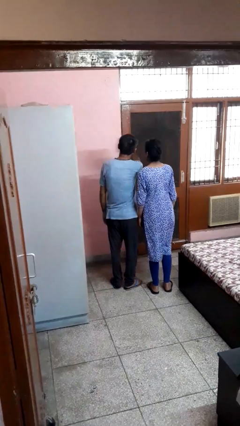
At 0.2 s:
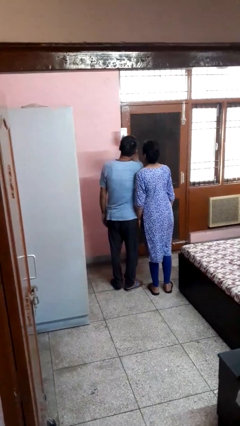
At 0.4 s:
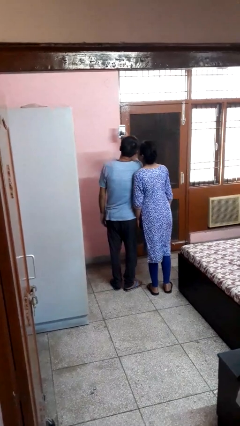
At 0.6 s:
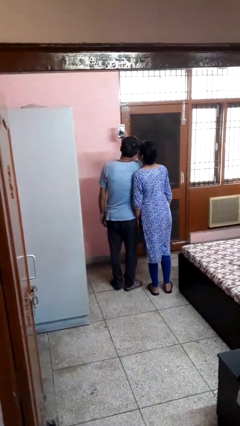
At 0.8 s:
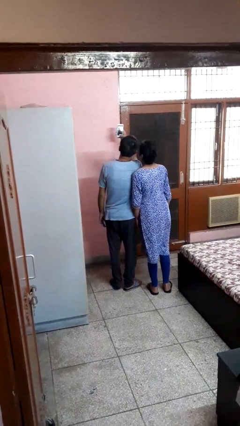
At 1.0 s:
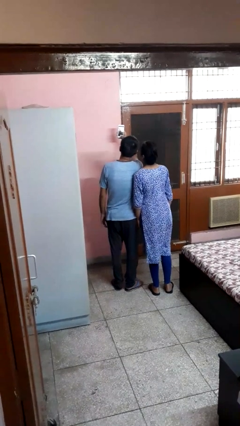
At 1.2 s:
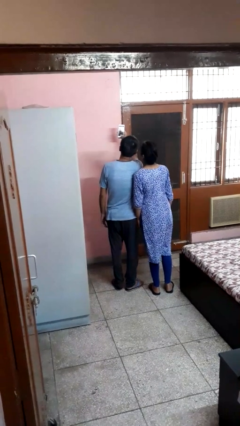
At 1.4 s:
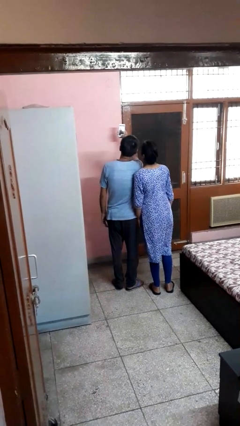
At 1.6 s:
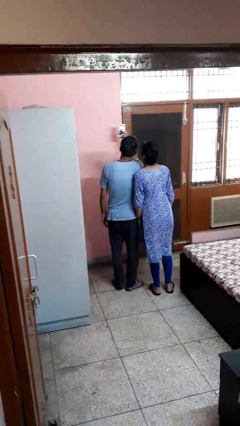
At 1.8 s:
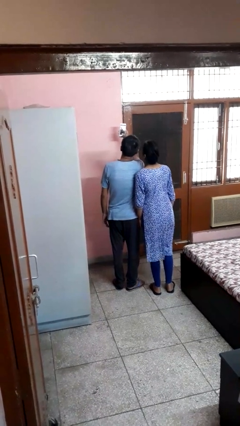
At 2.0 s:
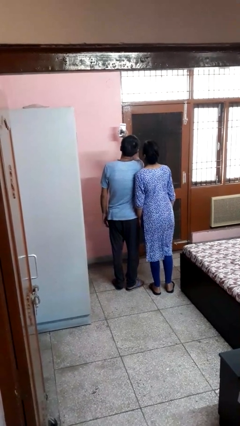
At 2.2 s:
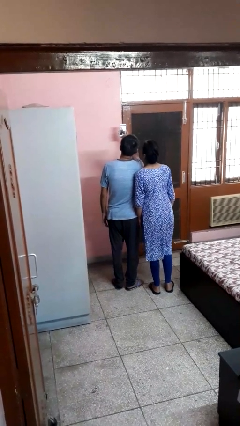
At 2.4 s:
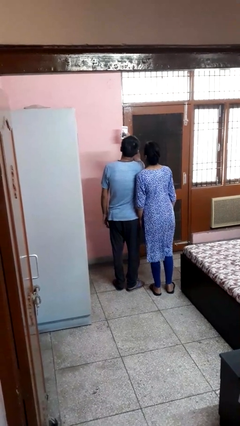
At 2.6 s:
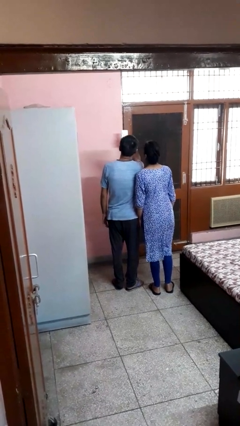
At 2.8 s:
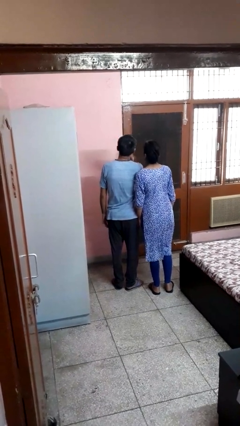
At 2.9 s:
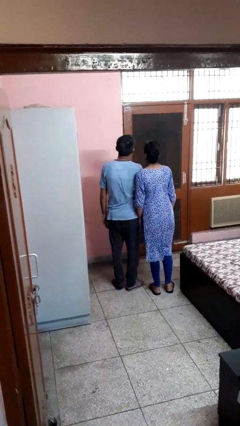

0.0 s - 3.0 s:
person takes selfie with person

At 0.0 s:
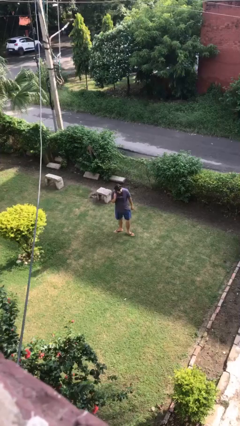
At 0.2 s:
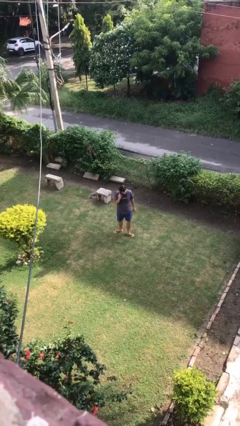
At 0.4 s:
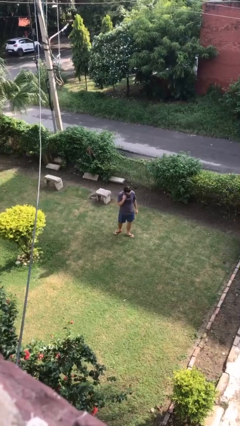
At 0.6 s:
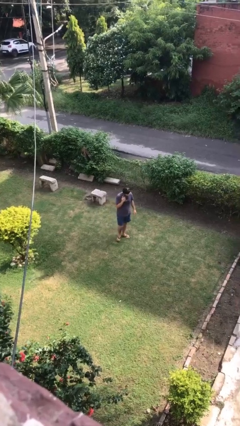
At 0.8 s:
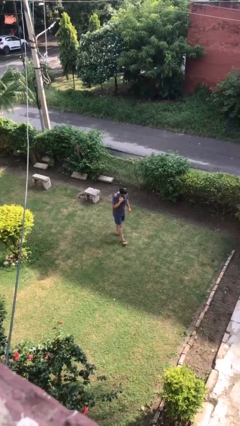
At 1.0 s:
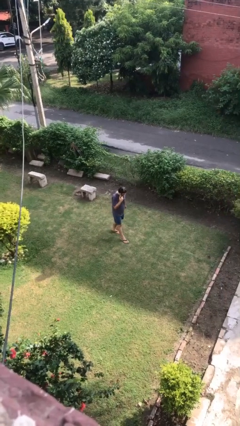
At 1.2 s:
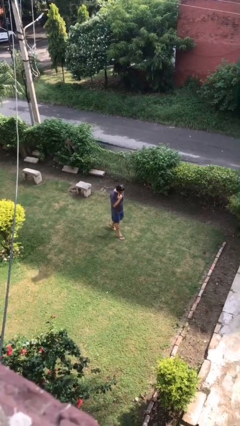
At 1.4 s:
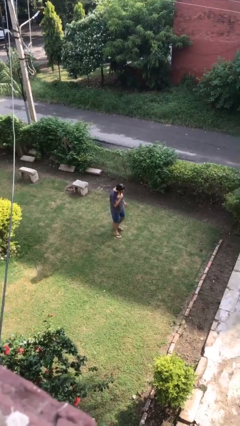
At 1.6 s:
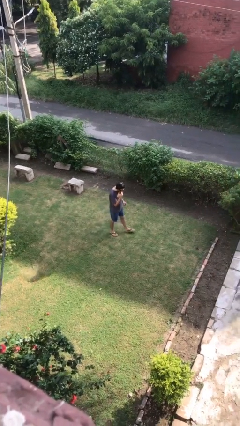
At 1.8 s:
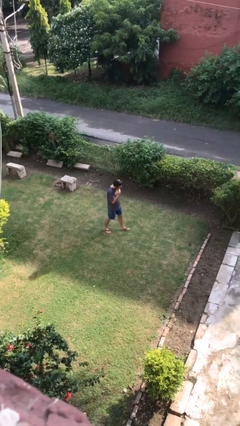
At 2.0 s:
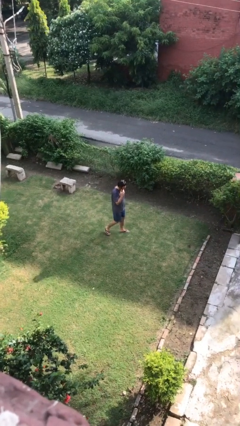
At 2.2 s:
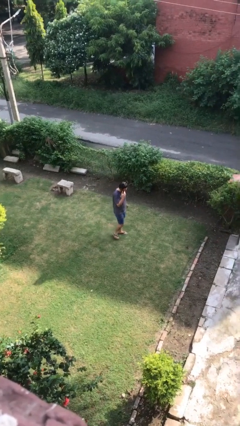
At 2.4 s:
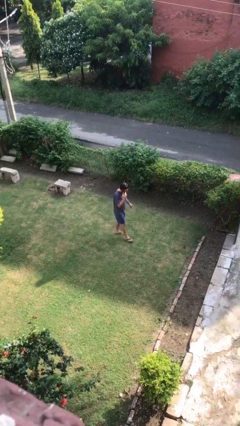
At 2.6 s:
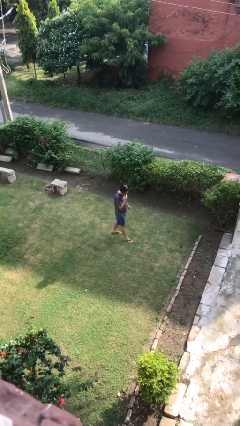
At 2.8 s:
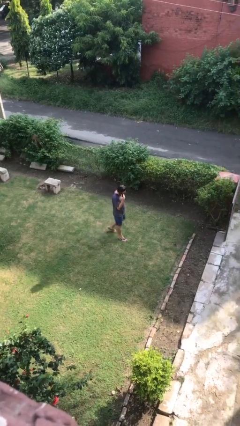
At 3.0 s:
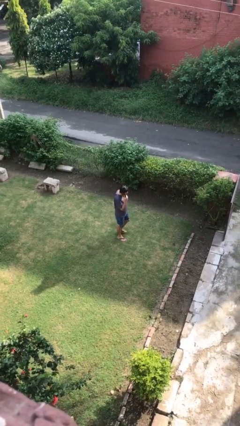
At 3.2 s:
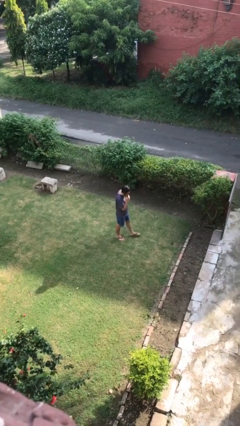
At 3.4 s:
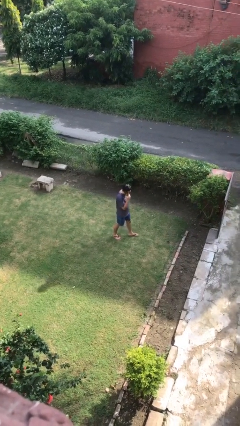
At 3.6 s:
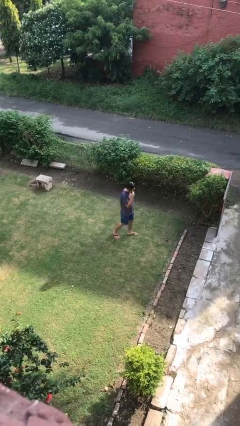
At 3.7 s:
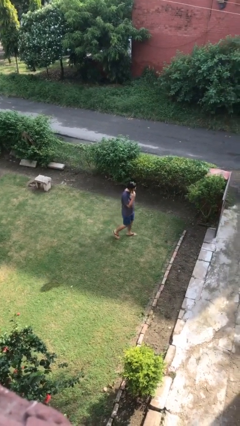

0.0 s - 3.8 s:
person talks on phone

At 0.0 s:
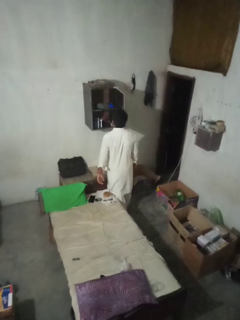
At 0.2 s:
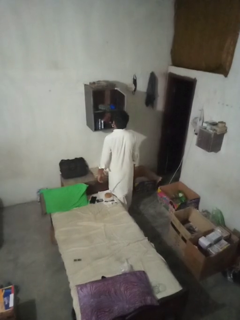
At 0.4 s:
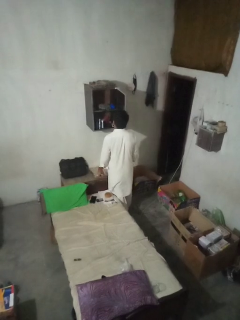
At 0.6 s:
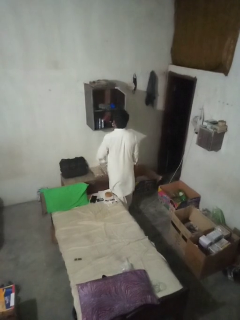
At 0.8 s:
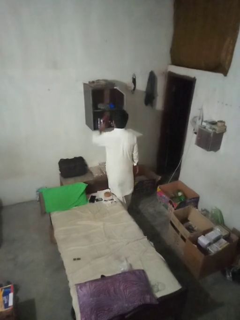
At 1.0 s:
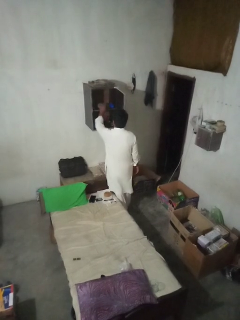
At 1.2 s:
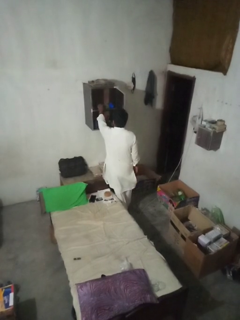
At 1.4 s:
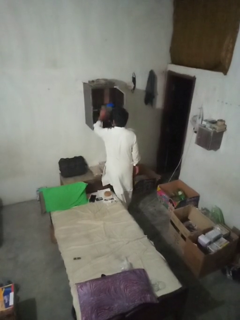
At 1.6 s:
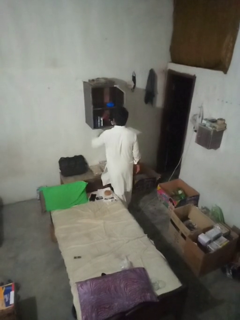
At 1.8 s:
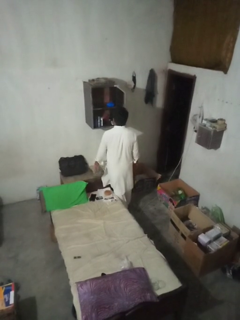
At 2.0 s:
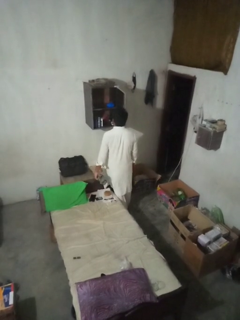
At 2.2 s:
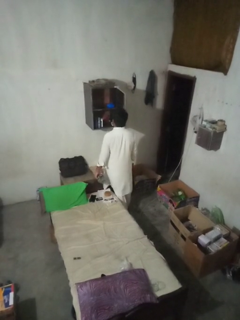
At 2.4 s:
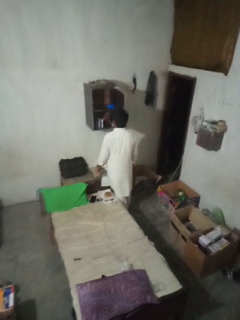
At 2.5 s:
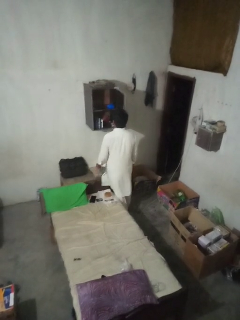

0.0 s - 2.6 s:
person takes clothes from dresser

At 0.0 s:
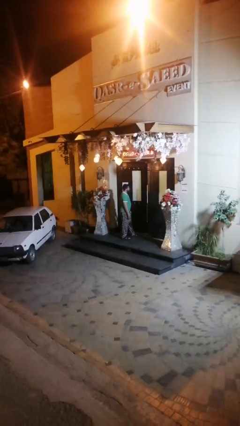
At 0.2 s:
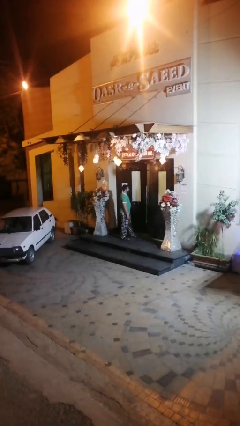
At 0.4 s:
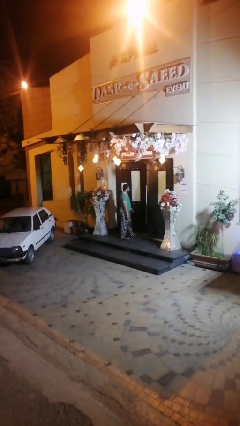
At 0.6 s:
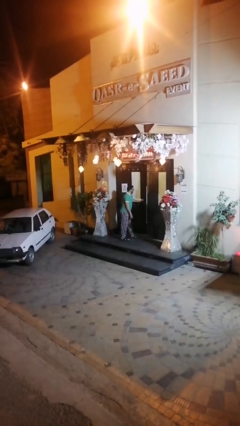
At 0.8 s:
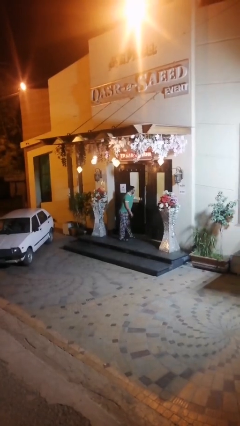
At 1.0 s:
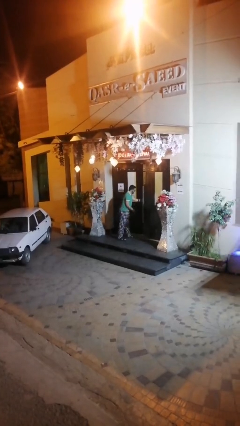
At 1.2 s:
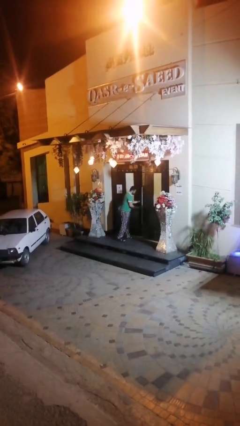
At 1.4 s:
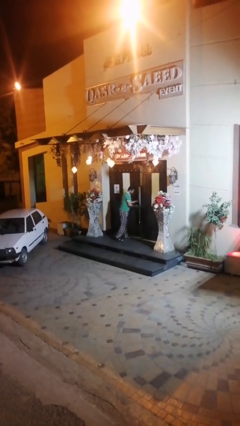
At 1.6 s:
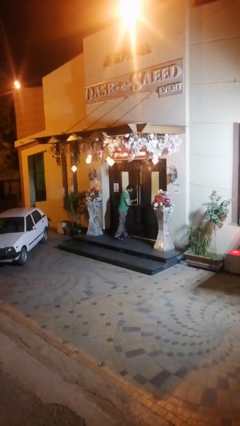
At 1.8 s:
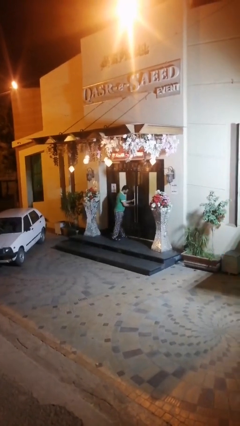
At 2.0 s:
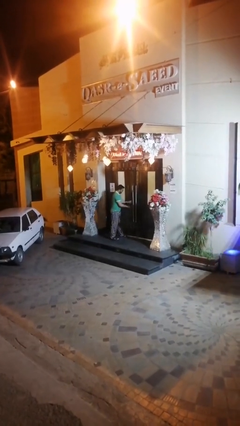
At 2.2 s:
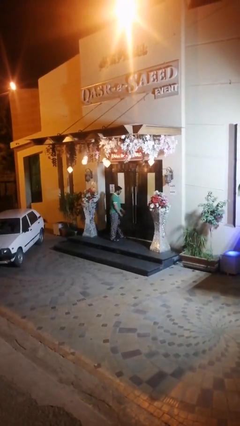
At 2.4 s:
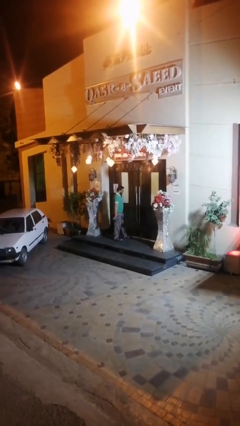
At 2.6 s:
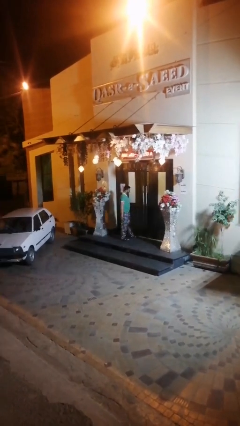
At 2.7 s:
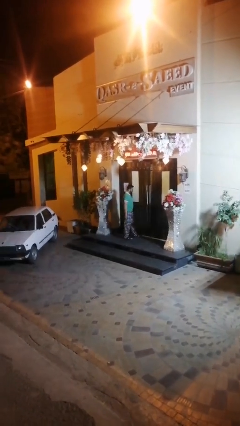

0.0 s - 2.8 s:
person closes facility door

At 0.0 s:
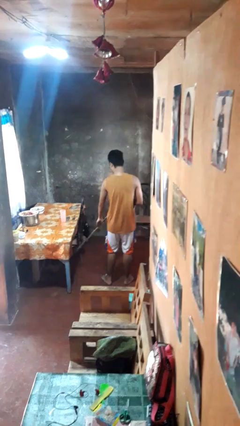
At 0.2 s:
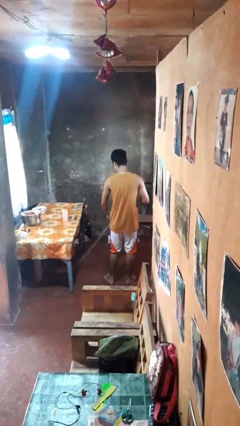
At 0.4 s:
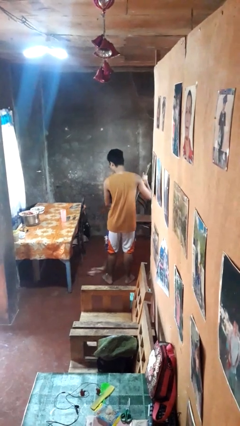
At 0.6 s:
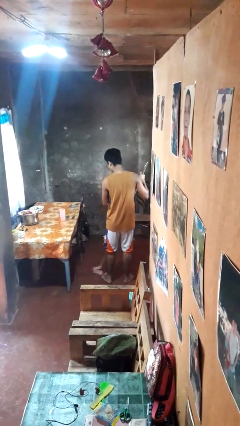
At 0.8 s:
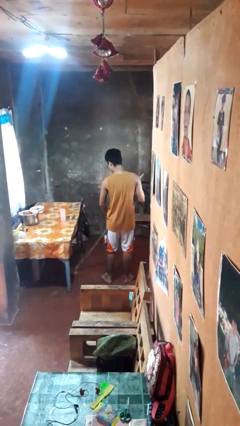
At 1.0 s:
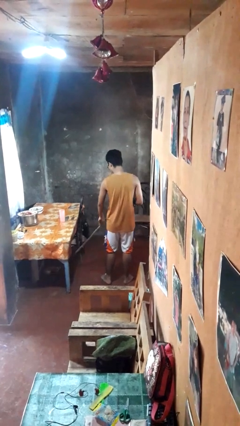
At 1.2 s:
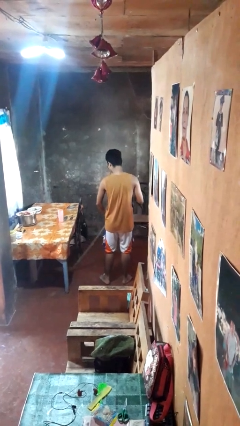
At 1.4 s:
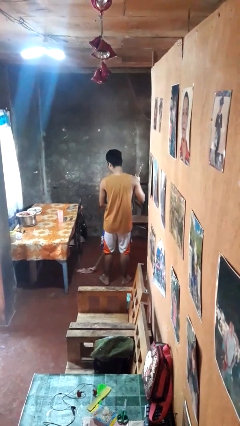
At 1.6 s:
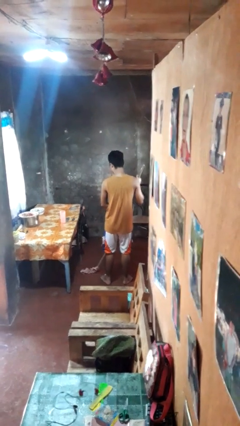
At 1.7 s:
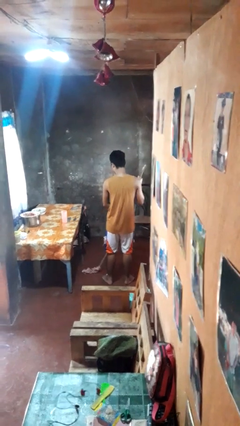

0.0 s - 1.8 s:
person mops

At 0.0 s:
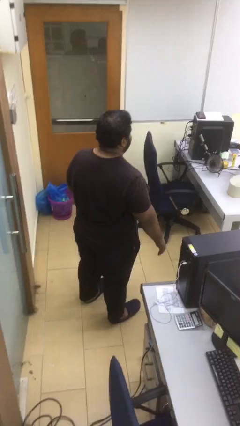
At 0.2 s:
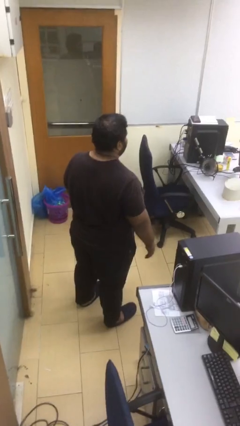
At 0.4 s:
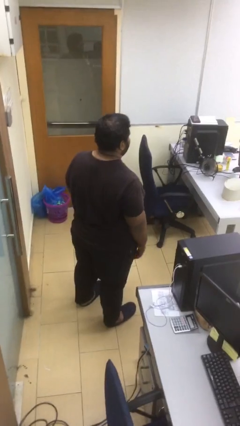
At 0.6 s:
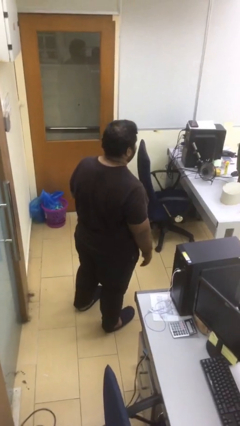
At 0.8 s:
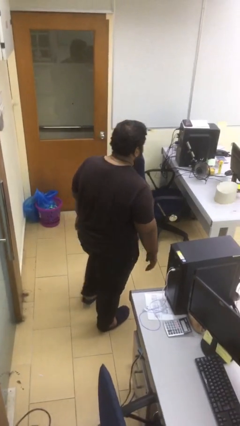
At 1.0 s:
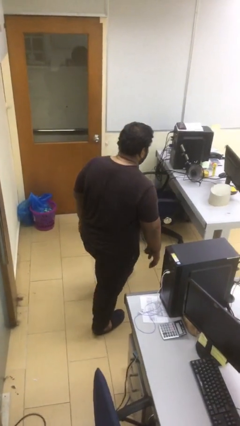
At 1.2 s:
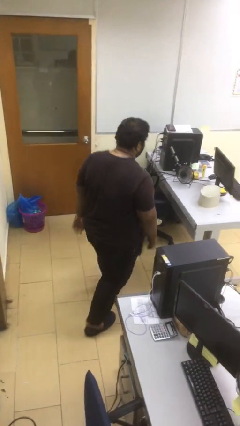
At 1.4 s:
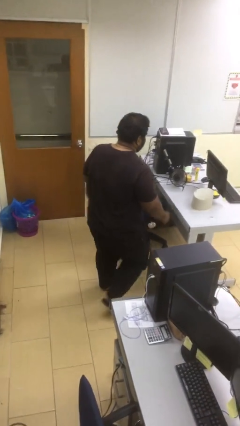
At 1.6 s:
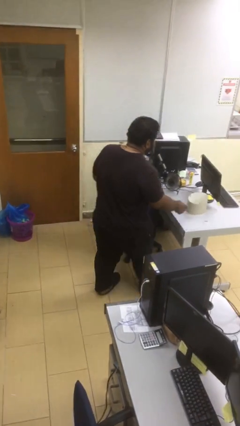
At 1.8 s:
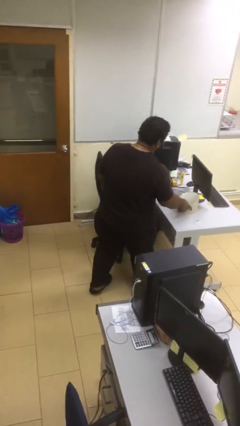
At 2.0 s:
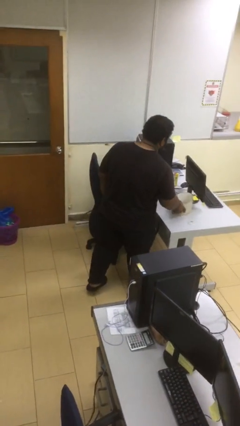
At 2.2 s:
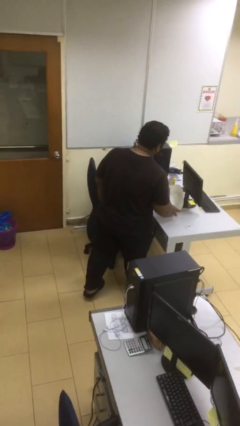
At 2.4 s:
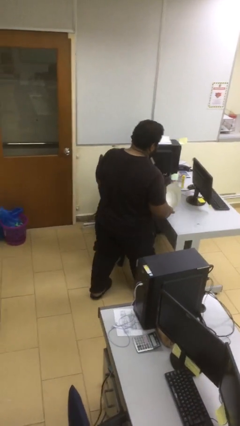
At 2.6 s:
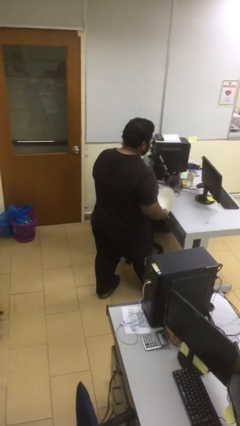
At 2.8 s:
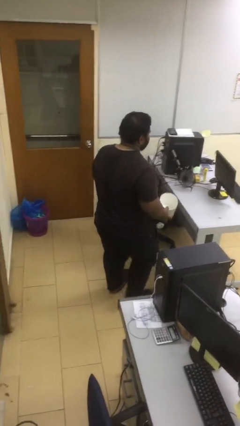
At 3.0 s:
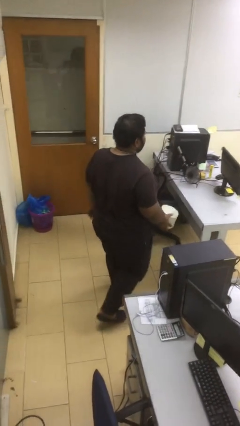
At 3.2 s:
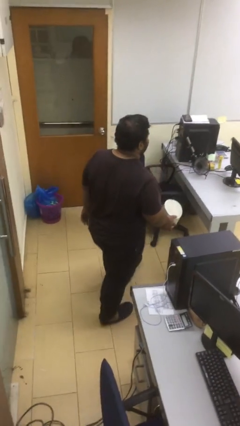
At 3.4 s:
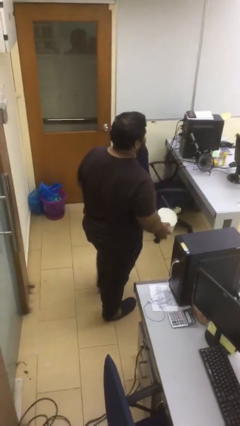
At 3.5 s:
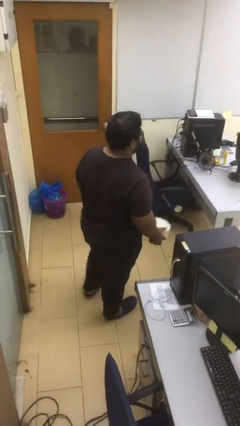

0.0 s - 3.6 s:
person picks up object from table

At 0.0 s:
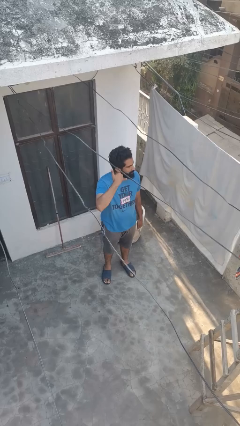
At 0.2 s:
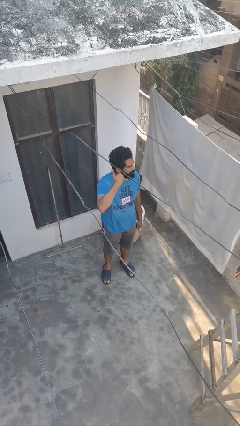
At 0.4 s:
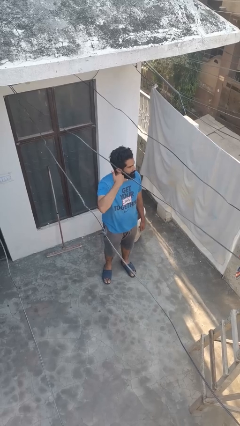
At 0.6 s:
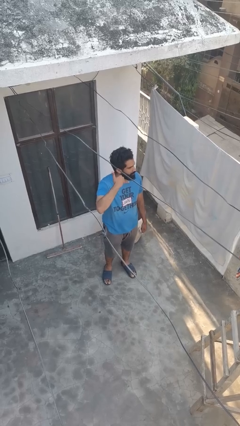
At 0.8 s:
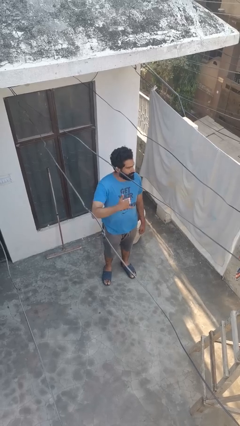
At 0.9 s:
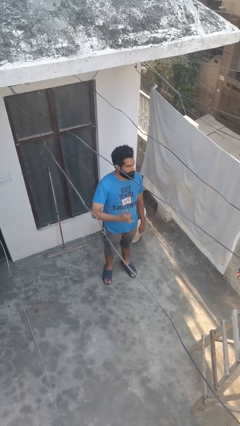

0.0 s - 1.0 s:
person gestures call me
